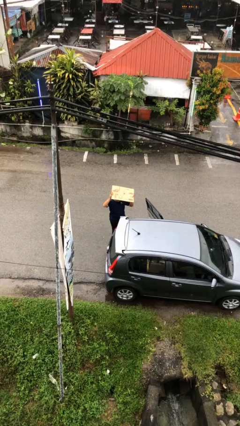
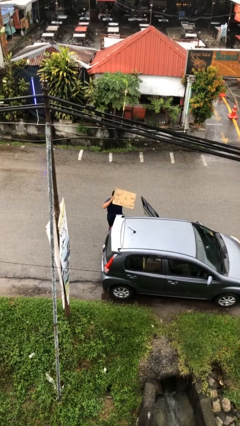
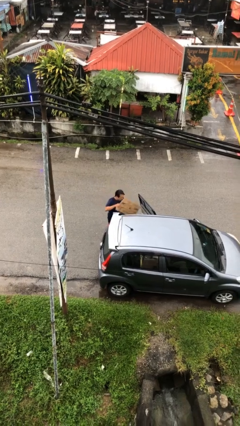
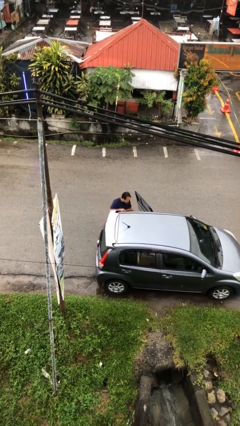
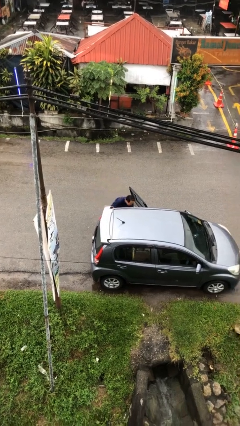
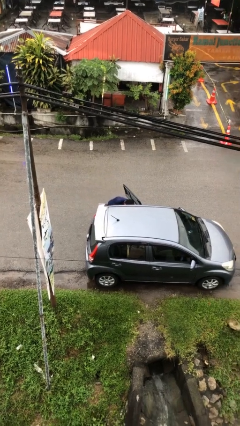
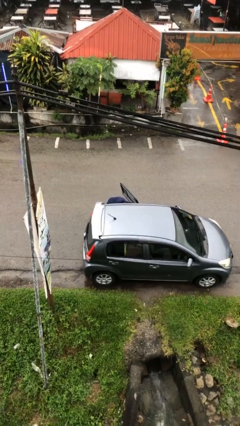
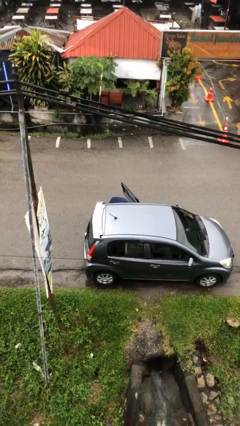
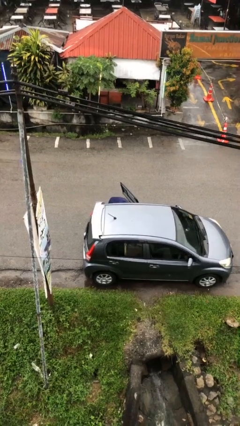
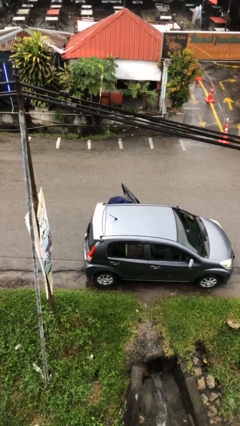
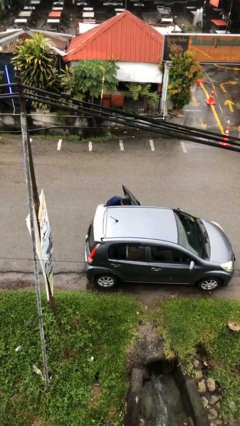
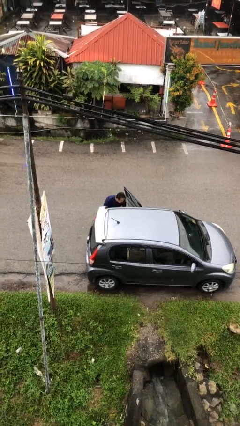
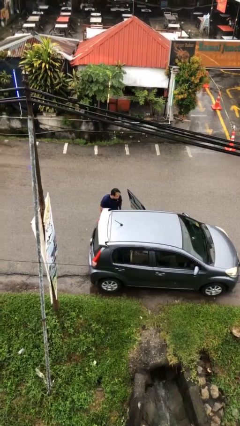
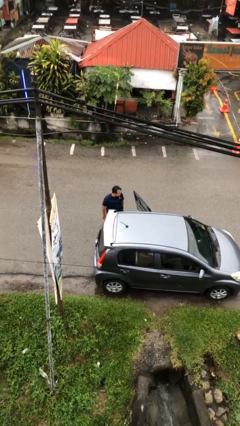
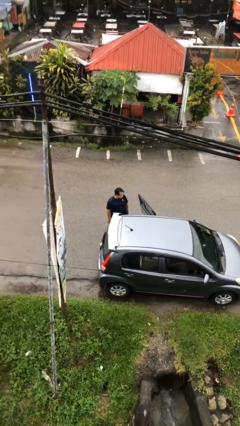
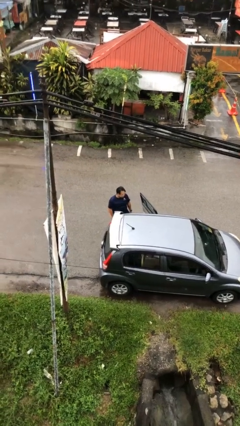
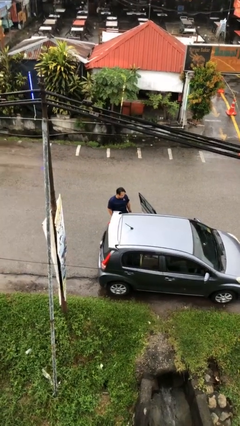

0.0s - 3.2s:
person loads car

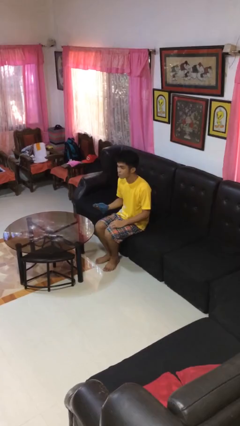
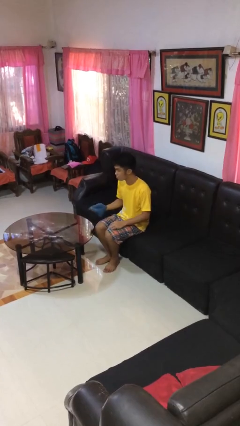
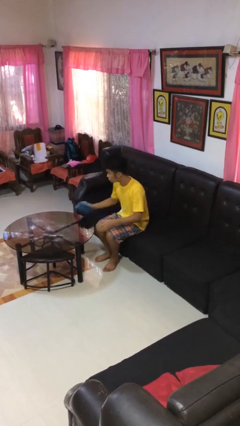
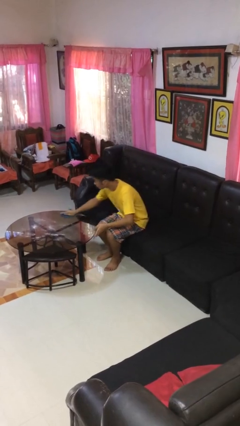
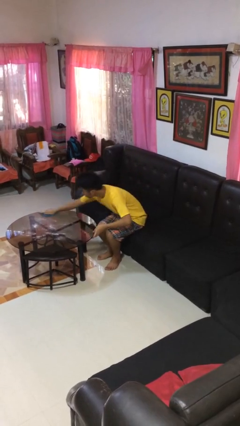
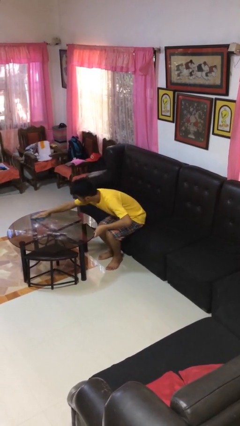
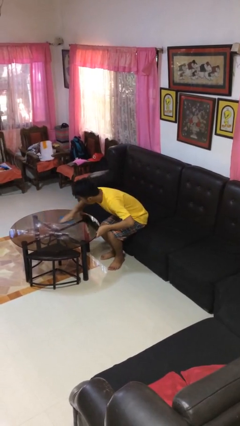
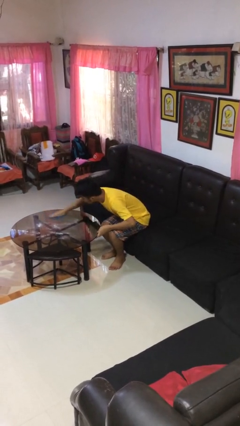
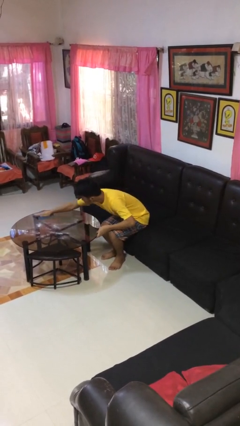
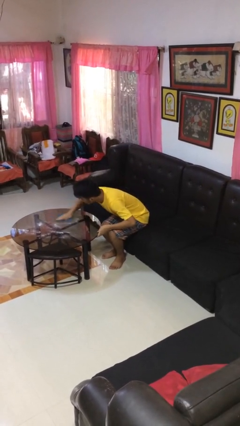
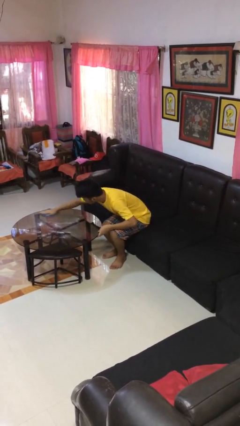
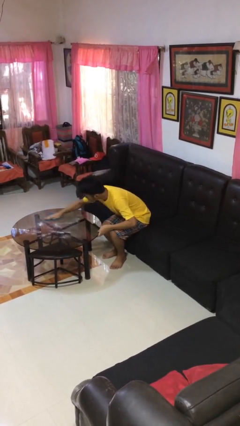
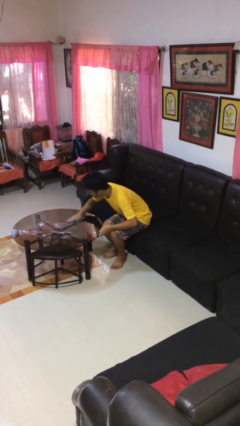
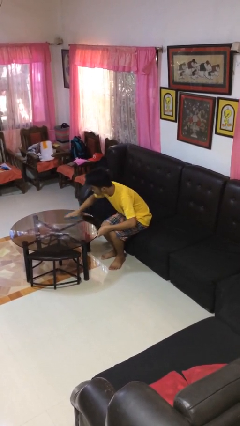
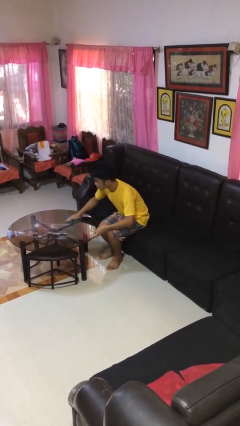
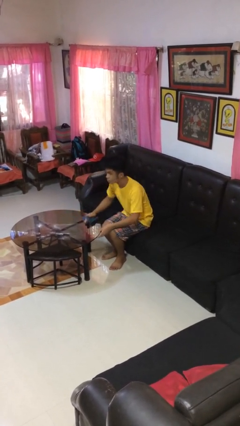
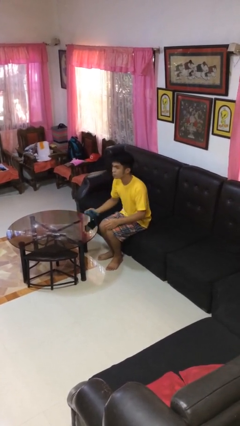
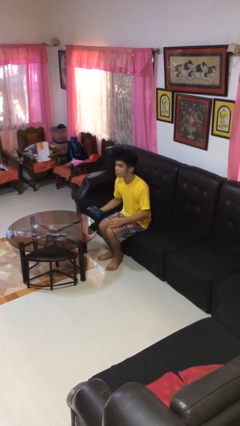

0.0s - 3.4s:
person cleans table with rag

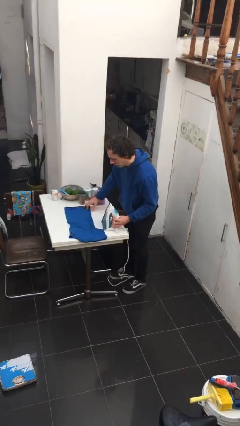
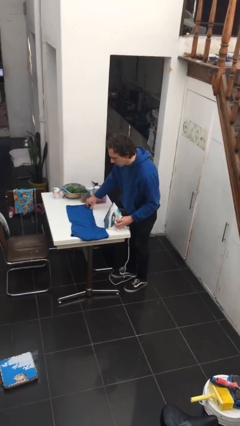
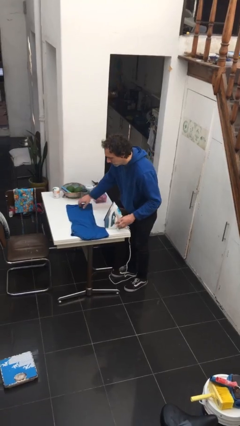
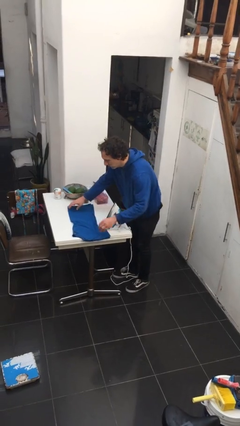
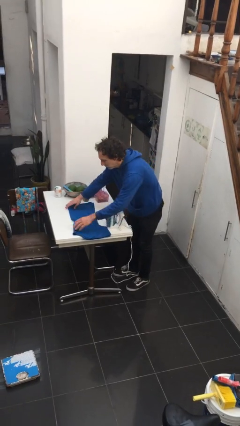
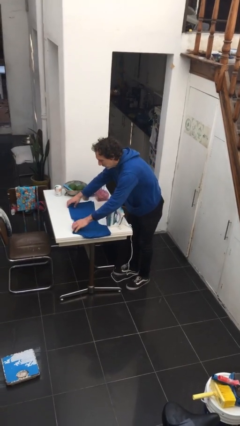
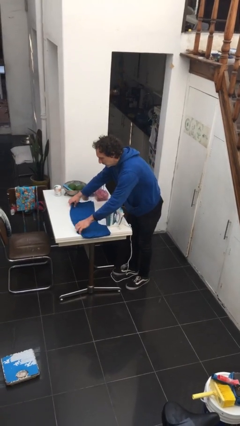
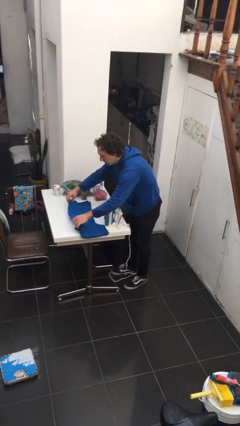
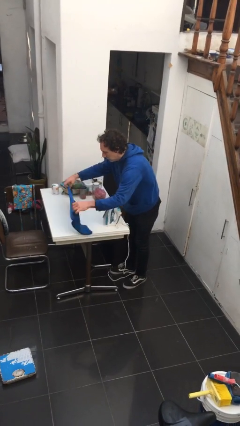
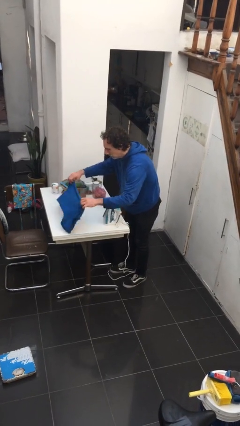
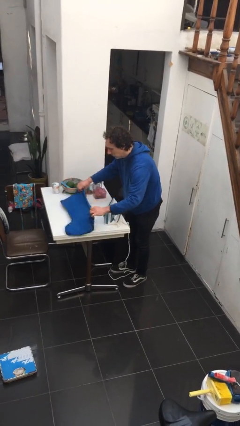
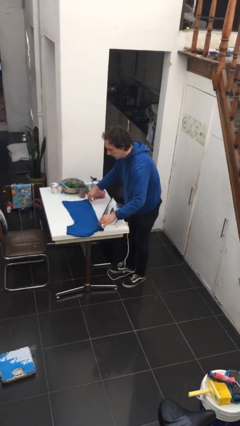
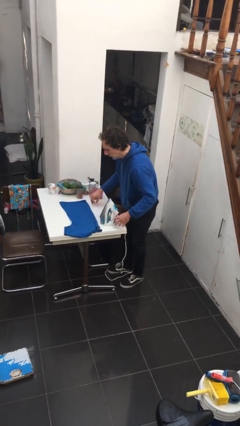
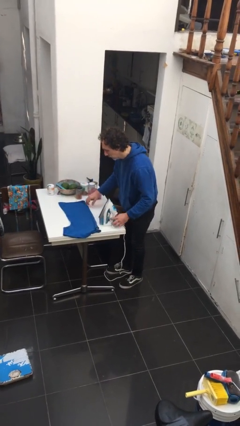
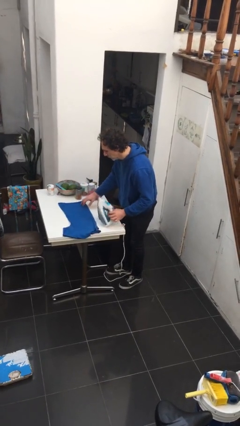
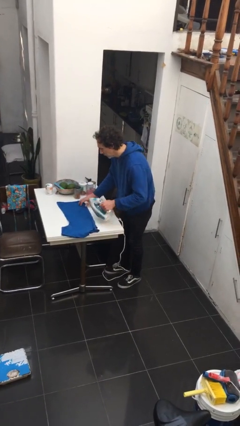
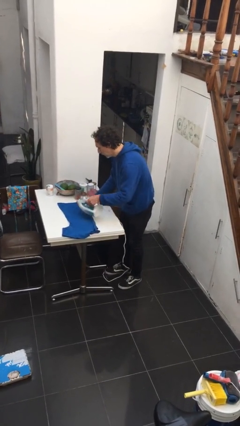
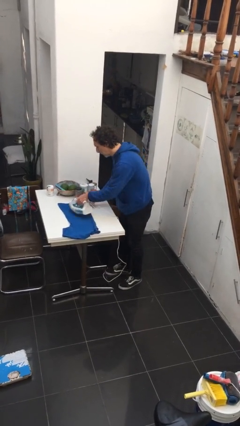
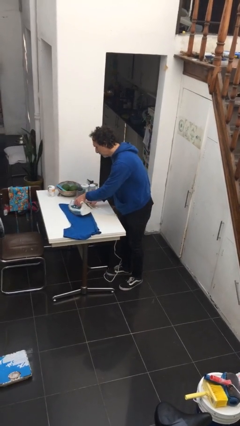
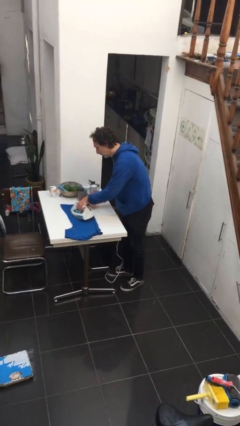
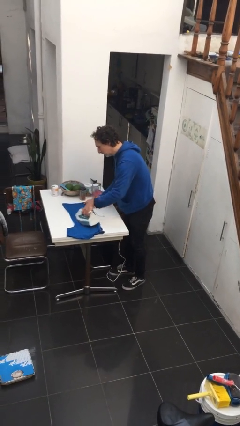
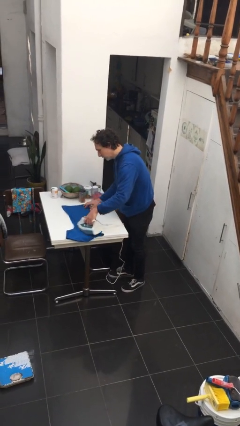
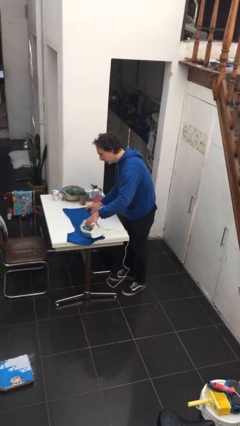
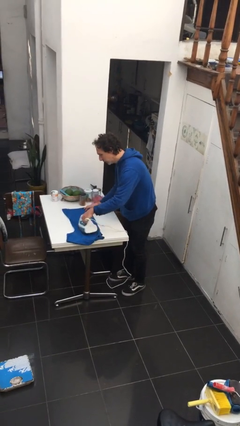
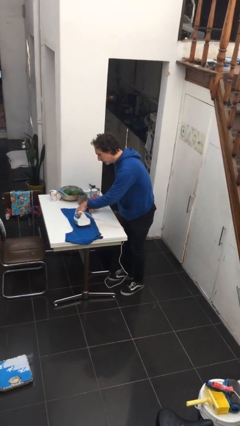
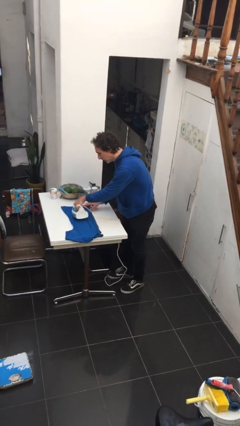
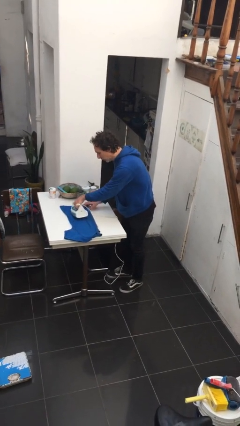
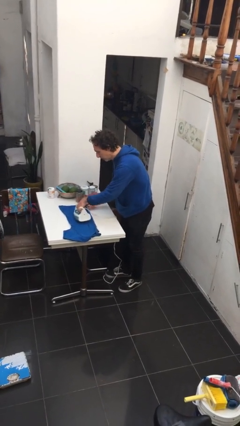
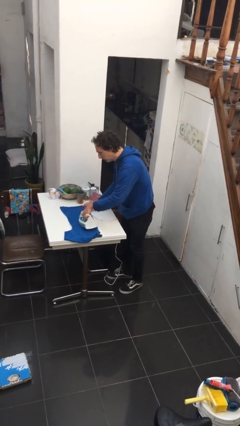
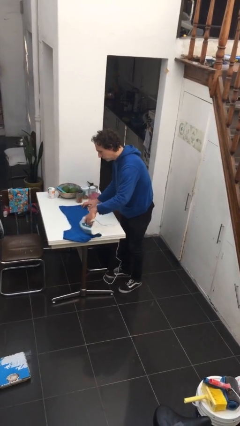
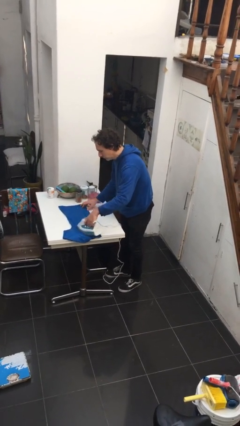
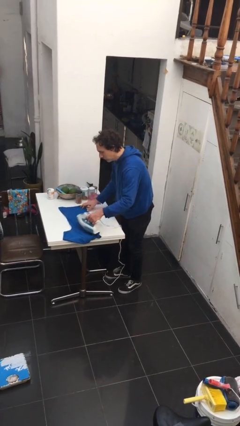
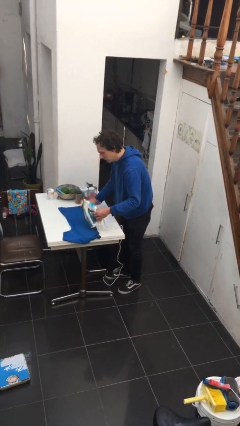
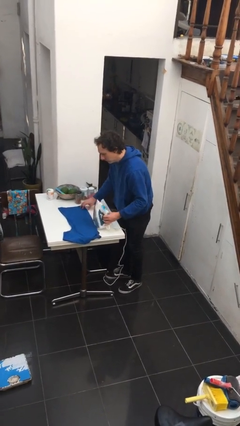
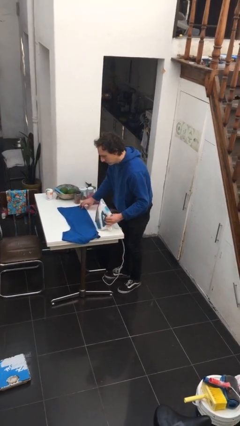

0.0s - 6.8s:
person irons clothes

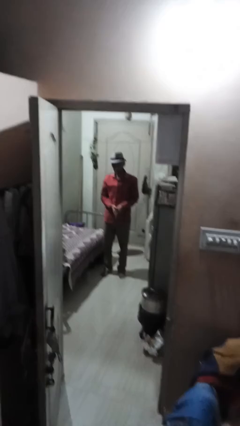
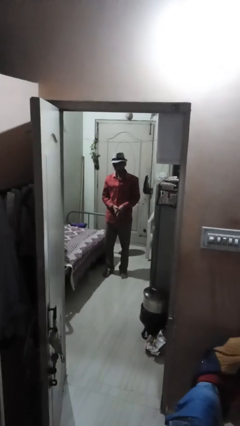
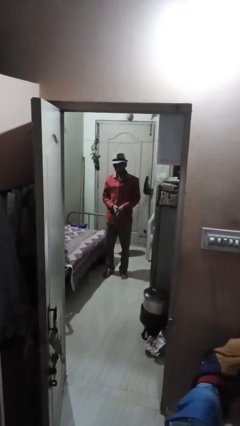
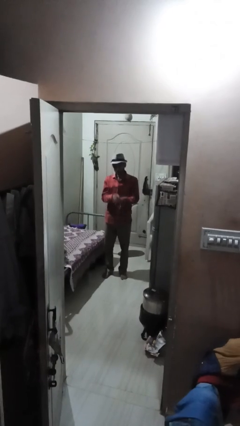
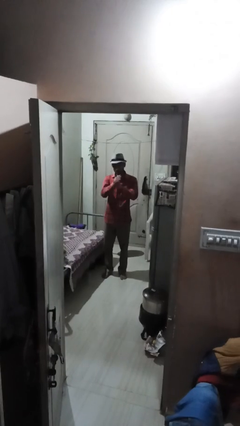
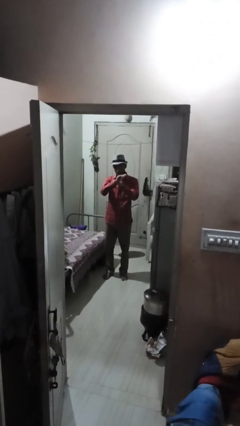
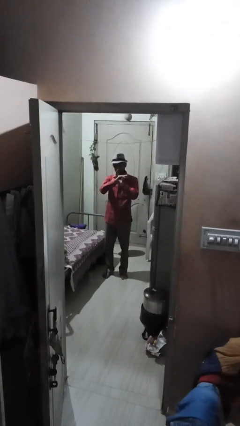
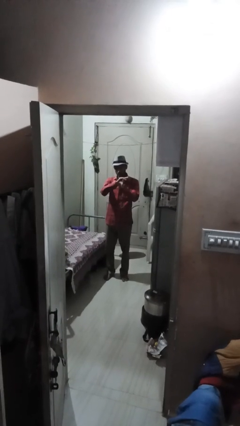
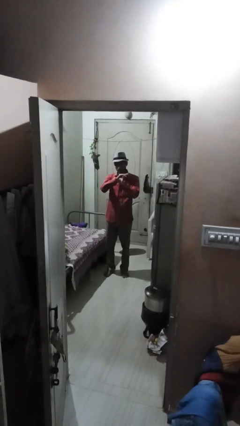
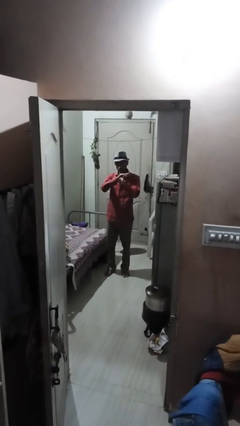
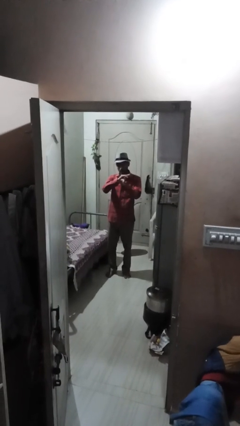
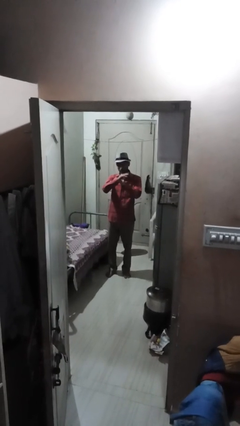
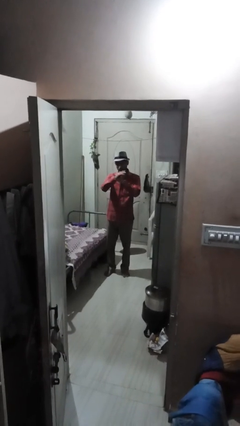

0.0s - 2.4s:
person cracks knuckles

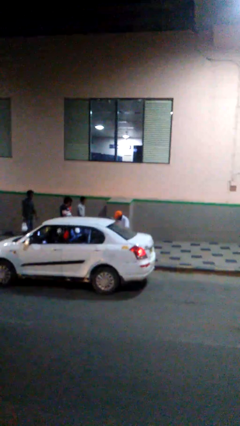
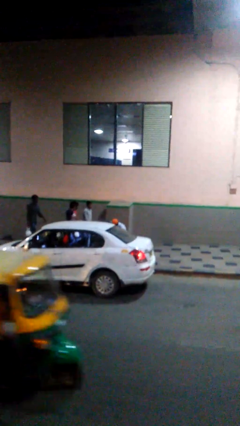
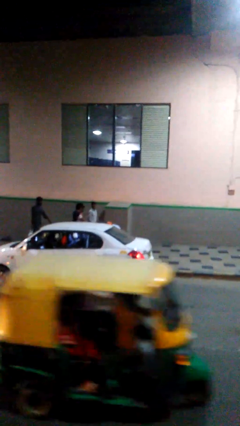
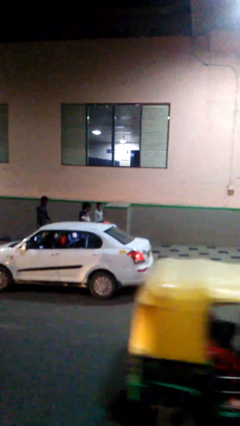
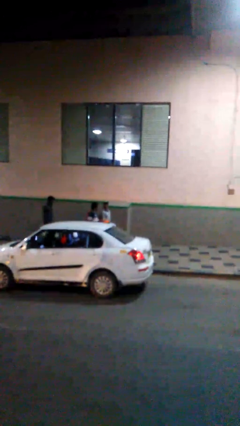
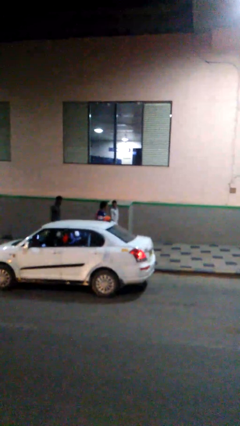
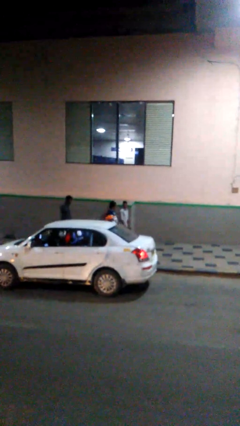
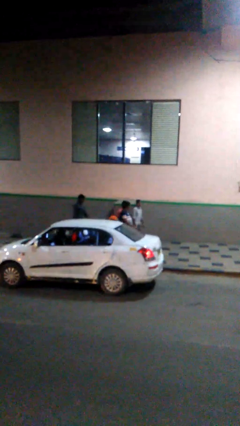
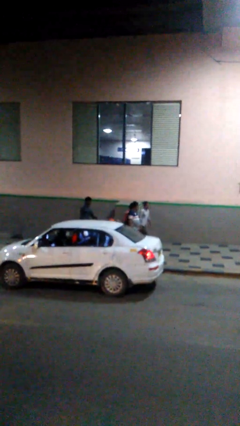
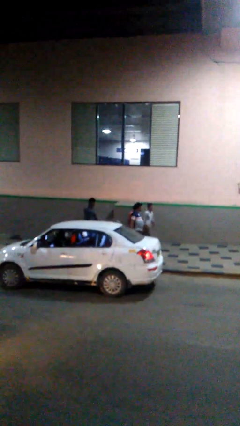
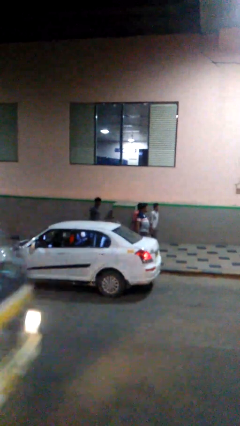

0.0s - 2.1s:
person enters car
